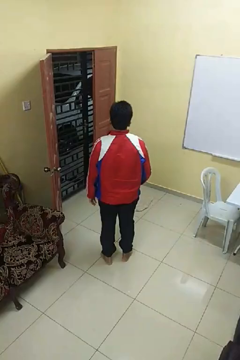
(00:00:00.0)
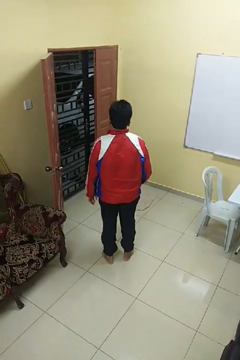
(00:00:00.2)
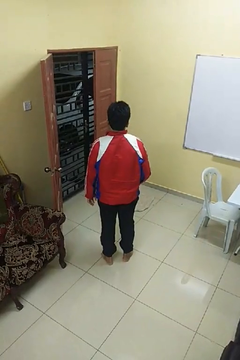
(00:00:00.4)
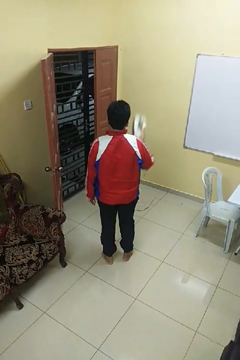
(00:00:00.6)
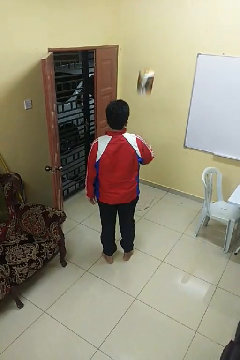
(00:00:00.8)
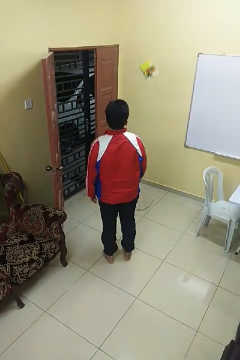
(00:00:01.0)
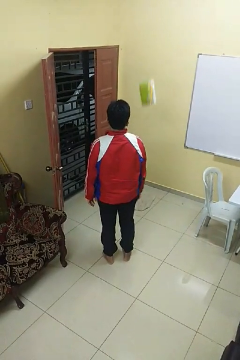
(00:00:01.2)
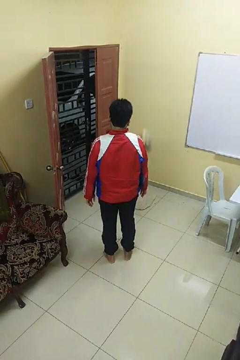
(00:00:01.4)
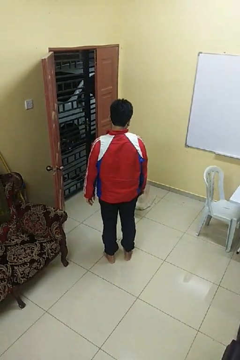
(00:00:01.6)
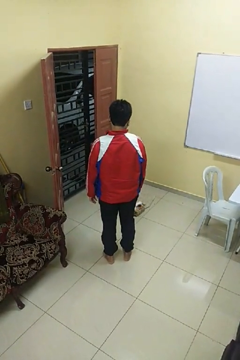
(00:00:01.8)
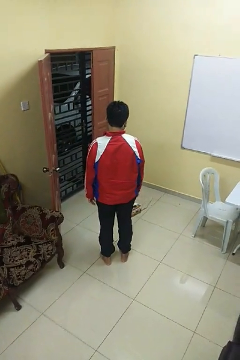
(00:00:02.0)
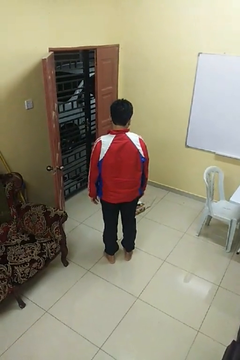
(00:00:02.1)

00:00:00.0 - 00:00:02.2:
person throws object into air

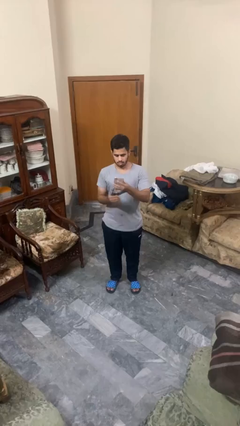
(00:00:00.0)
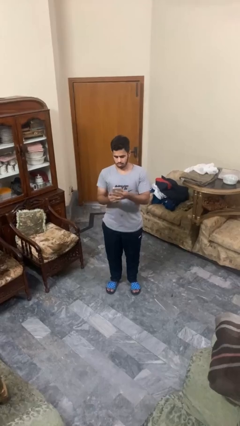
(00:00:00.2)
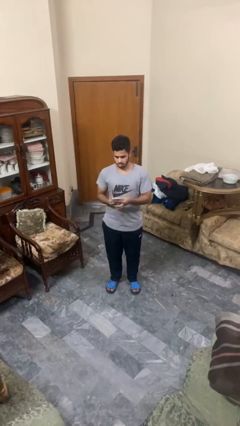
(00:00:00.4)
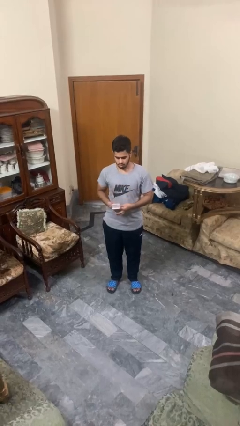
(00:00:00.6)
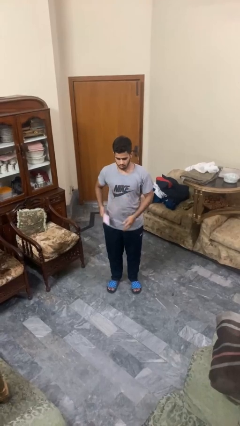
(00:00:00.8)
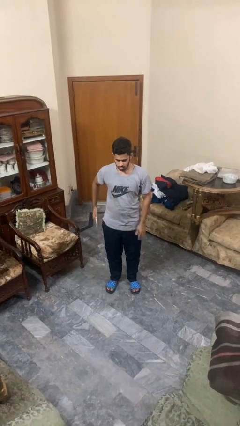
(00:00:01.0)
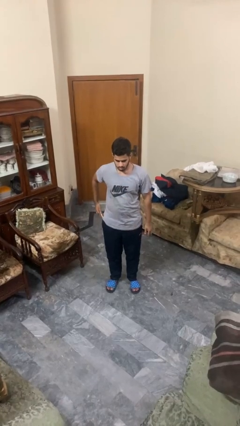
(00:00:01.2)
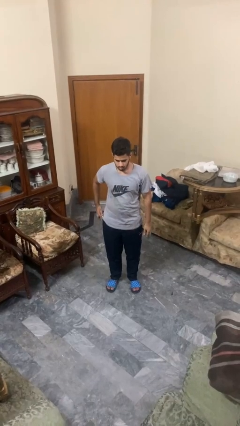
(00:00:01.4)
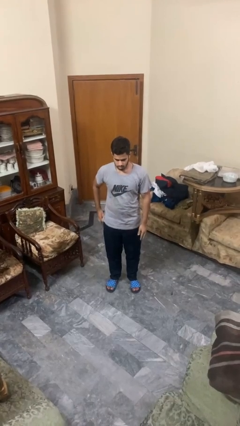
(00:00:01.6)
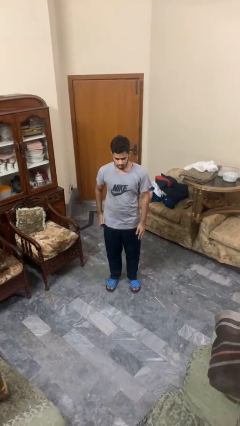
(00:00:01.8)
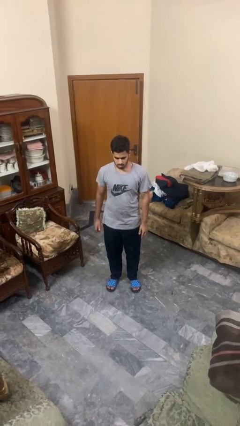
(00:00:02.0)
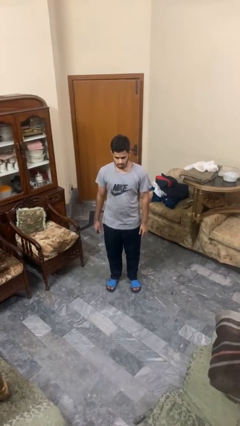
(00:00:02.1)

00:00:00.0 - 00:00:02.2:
person puts phone into pocket

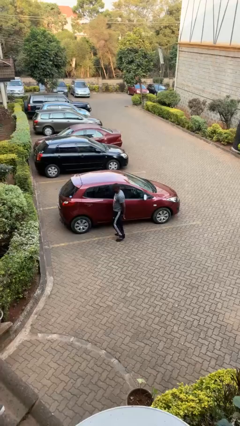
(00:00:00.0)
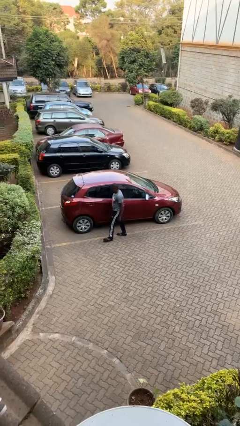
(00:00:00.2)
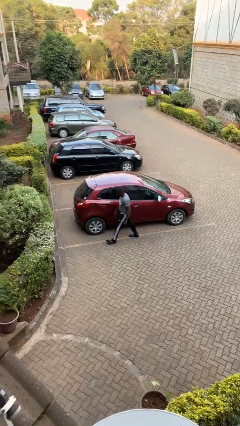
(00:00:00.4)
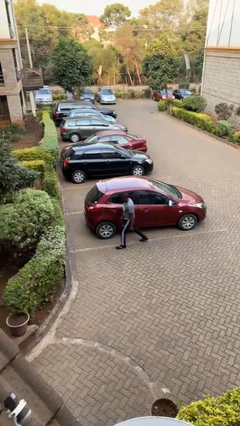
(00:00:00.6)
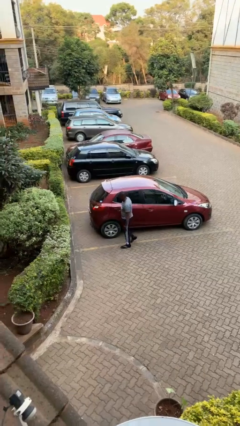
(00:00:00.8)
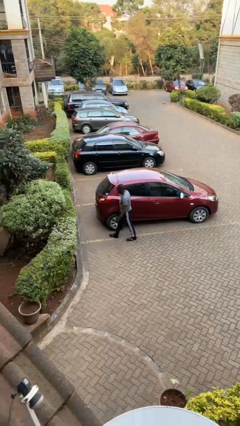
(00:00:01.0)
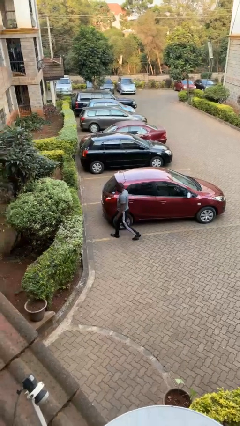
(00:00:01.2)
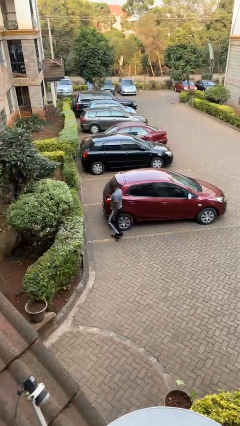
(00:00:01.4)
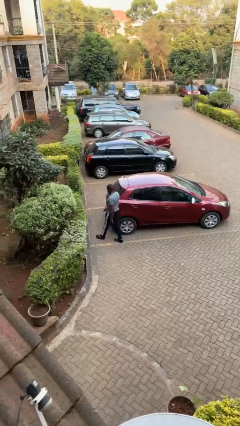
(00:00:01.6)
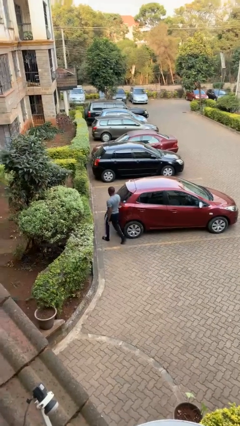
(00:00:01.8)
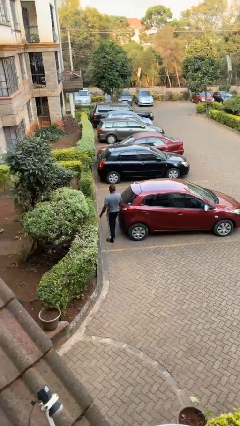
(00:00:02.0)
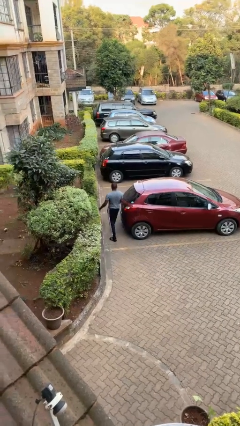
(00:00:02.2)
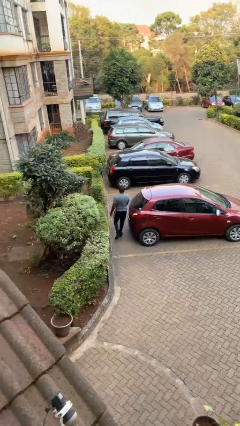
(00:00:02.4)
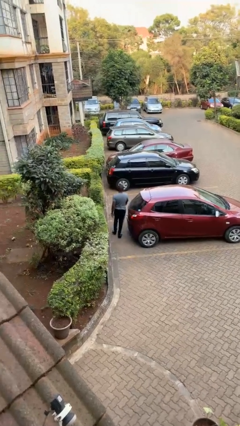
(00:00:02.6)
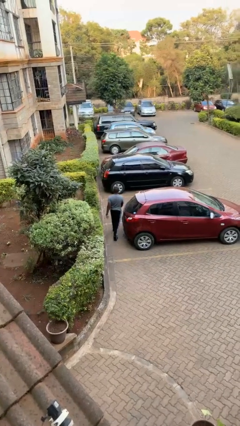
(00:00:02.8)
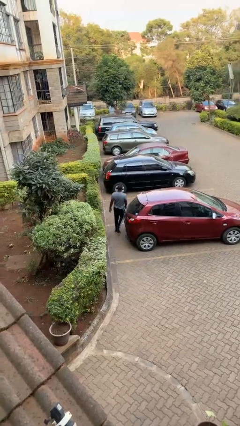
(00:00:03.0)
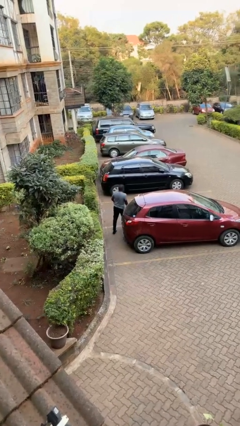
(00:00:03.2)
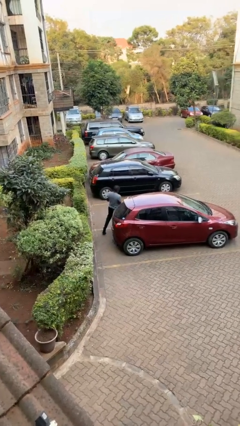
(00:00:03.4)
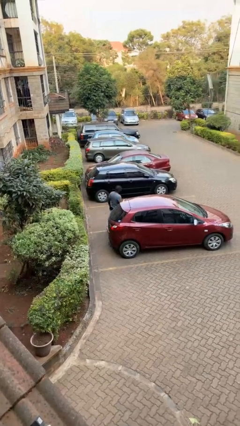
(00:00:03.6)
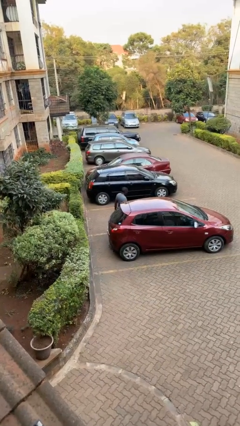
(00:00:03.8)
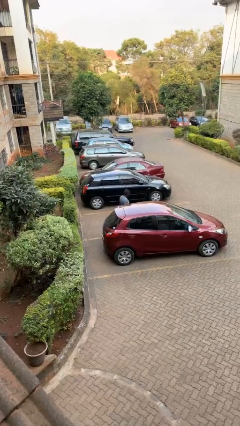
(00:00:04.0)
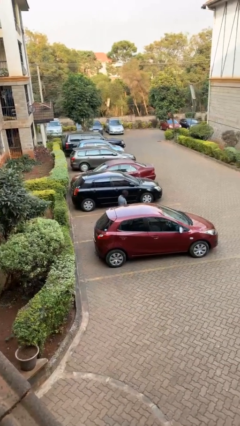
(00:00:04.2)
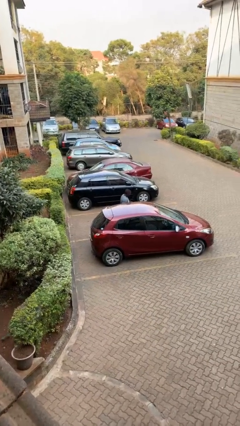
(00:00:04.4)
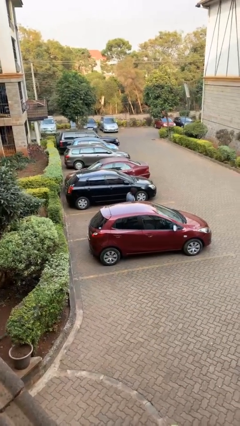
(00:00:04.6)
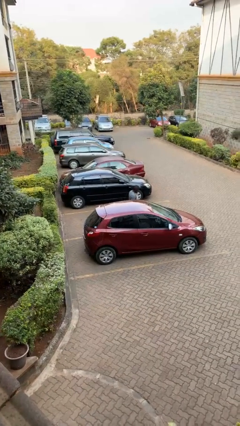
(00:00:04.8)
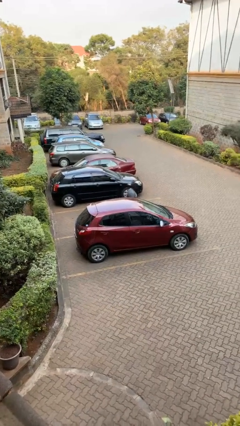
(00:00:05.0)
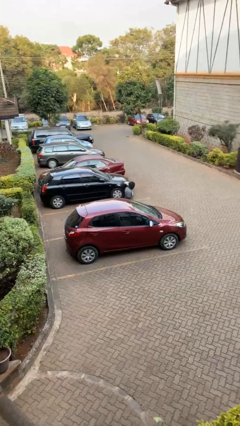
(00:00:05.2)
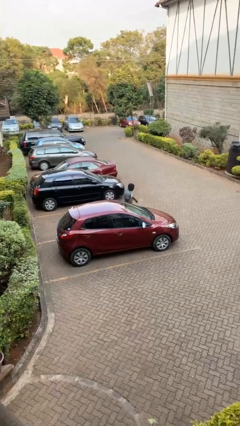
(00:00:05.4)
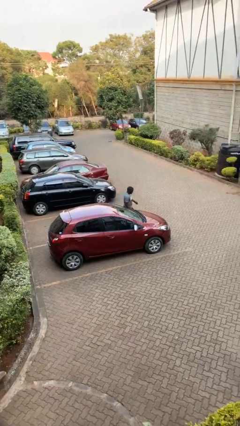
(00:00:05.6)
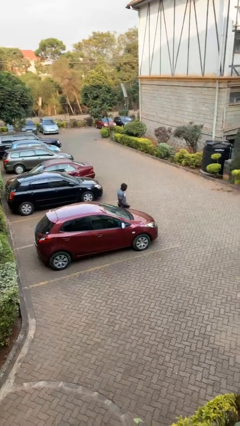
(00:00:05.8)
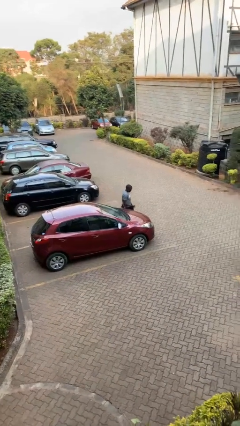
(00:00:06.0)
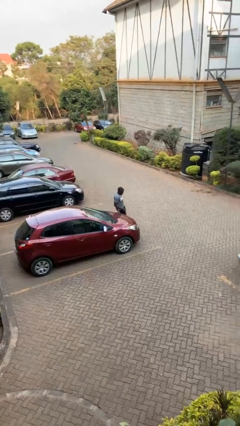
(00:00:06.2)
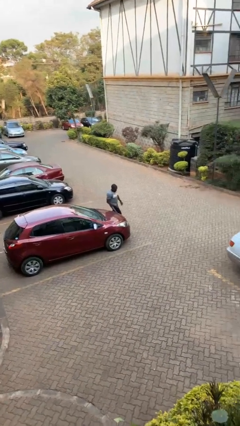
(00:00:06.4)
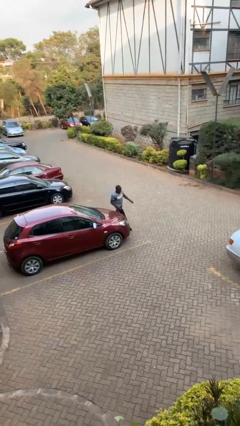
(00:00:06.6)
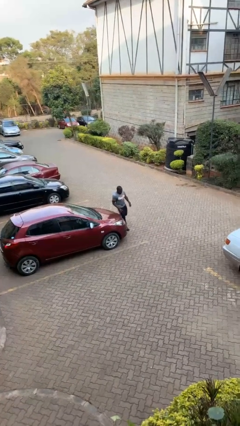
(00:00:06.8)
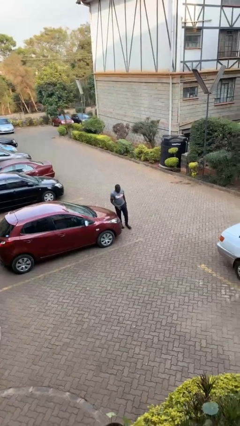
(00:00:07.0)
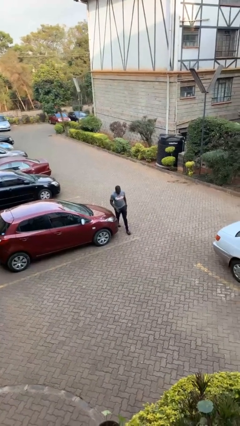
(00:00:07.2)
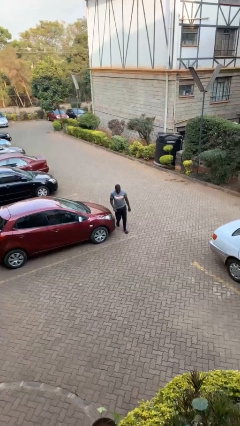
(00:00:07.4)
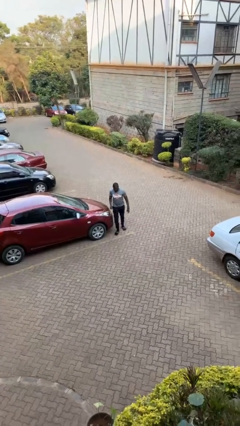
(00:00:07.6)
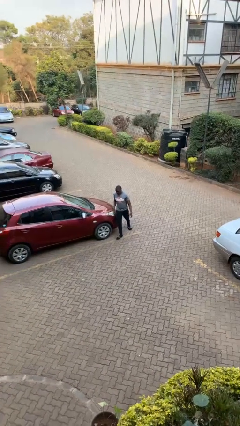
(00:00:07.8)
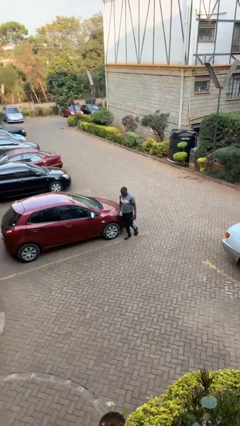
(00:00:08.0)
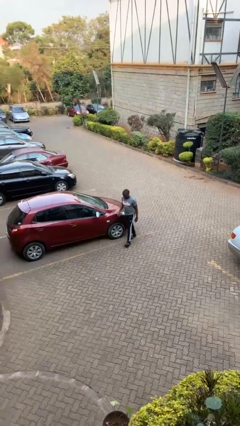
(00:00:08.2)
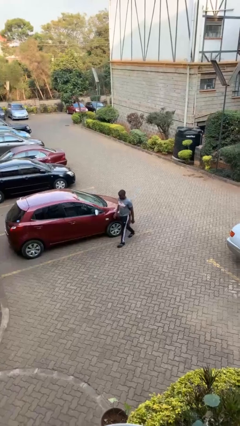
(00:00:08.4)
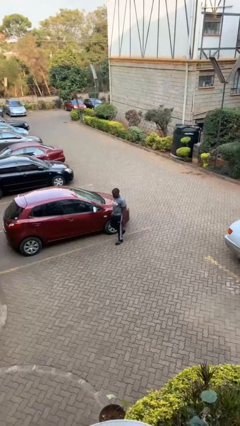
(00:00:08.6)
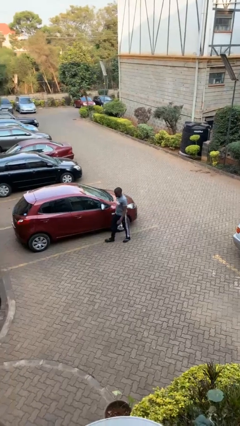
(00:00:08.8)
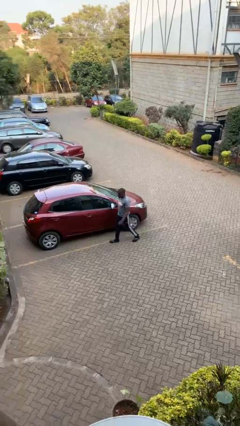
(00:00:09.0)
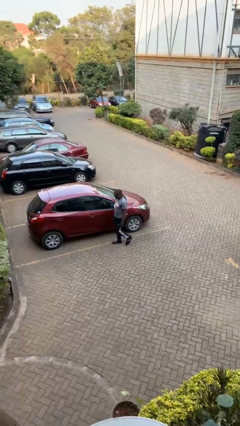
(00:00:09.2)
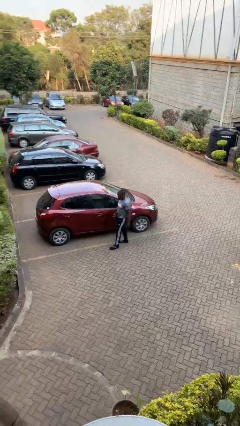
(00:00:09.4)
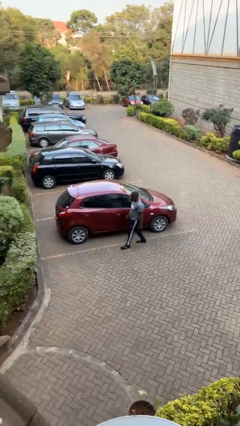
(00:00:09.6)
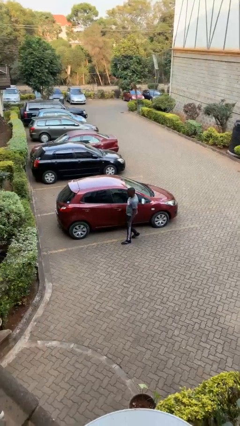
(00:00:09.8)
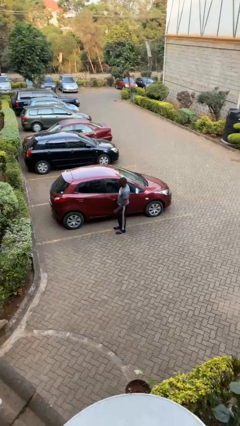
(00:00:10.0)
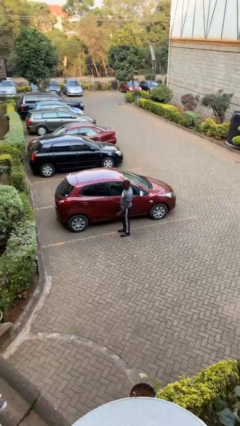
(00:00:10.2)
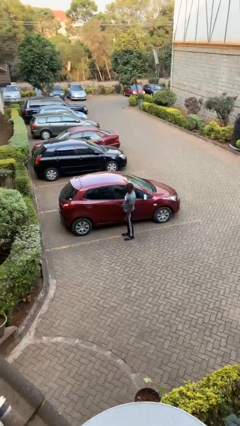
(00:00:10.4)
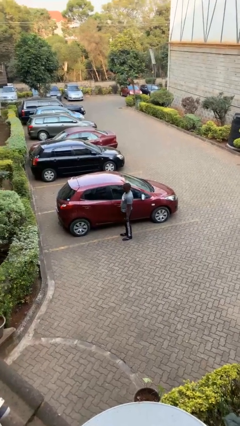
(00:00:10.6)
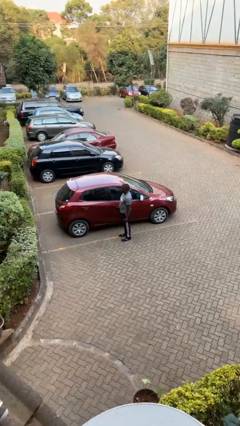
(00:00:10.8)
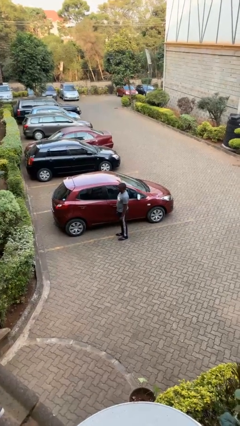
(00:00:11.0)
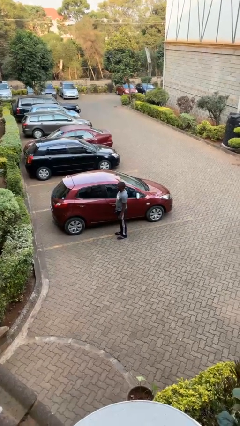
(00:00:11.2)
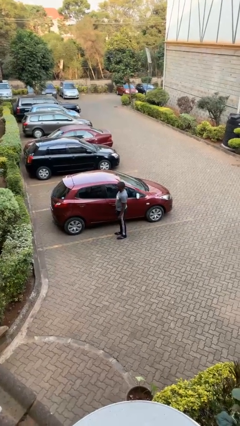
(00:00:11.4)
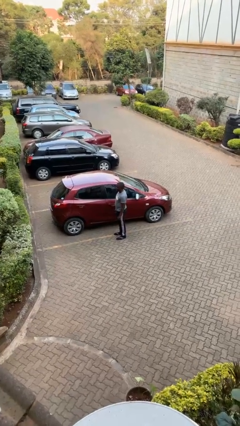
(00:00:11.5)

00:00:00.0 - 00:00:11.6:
person walks around car

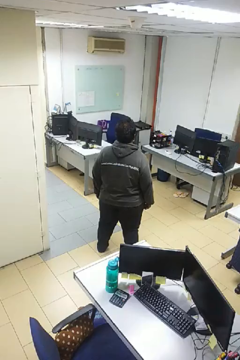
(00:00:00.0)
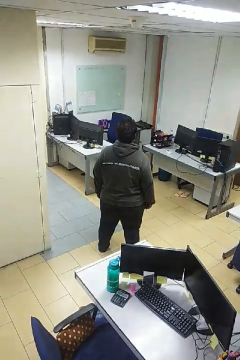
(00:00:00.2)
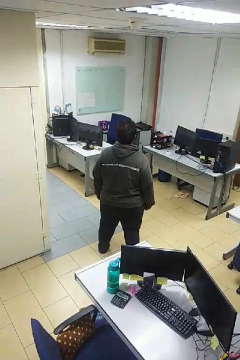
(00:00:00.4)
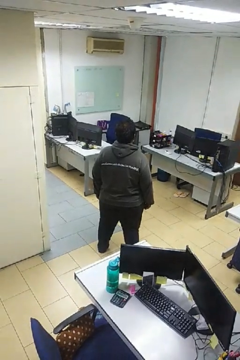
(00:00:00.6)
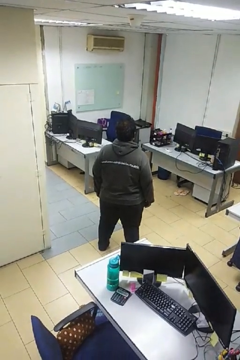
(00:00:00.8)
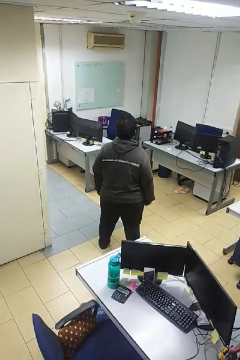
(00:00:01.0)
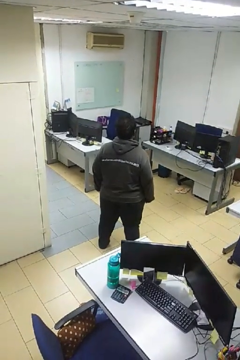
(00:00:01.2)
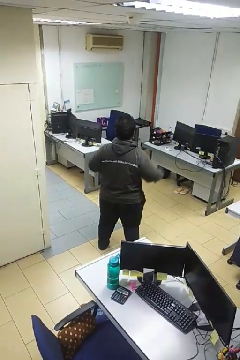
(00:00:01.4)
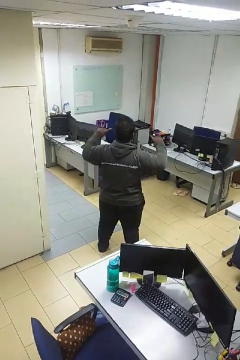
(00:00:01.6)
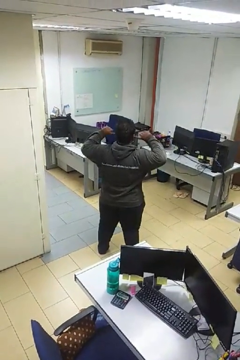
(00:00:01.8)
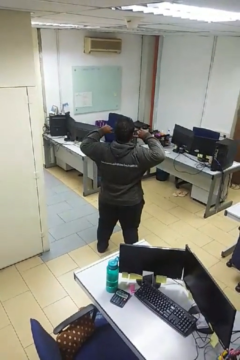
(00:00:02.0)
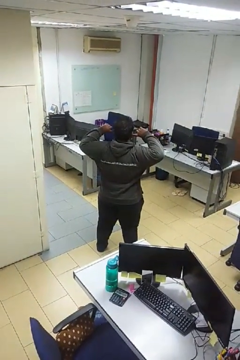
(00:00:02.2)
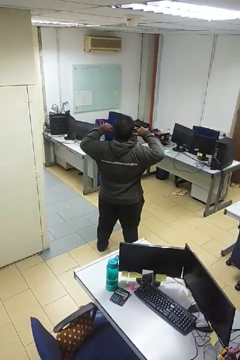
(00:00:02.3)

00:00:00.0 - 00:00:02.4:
person puts fingers in ear
